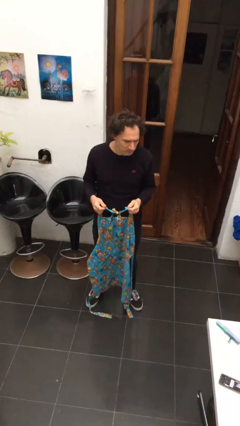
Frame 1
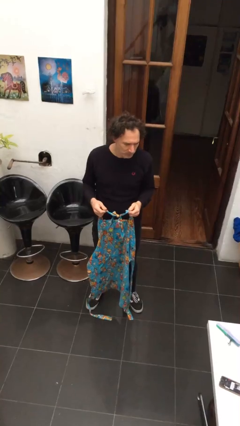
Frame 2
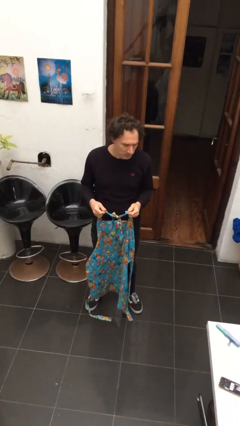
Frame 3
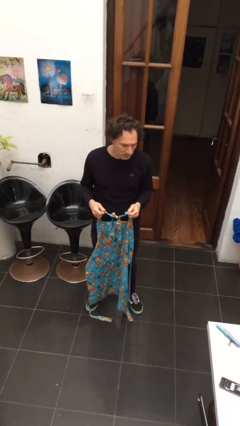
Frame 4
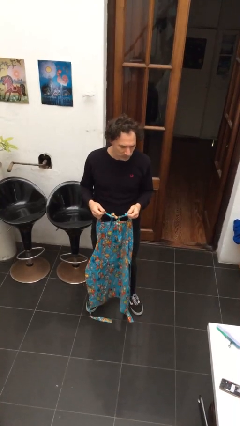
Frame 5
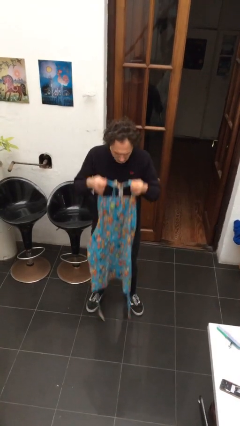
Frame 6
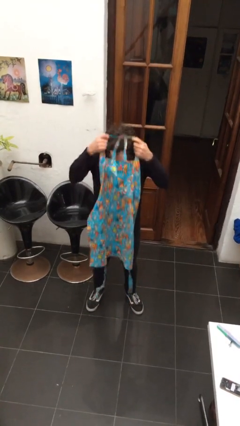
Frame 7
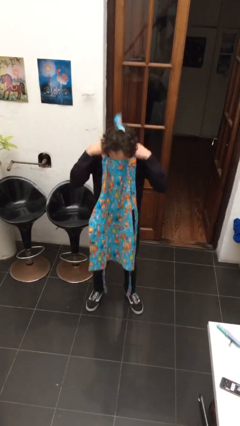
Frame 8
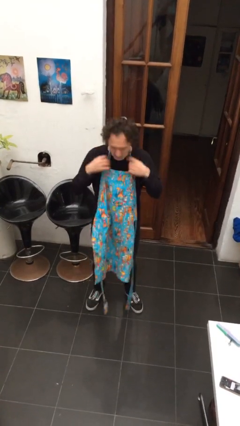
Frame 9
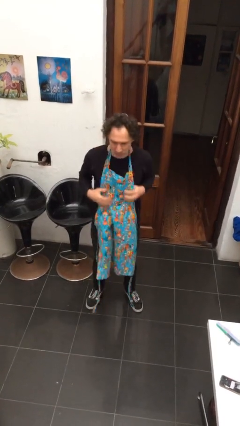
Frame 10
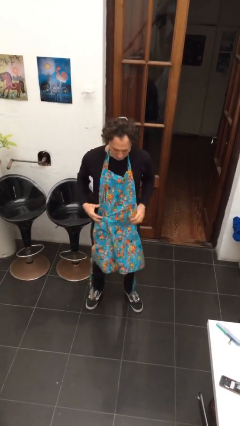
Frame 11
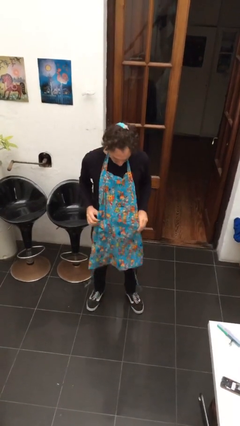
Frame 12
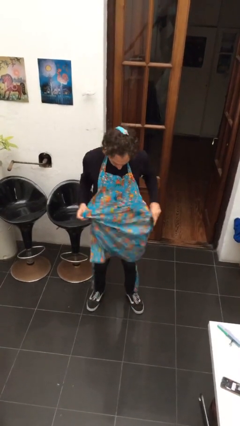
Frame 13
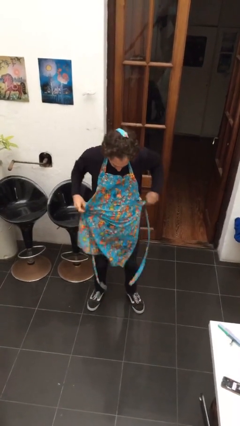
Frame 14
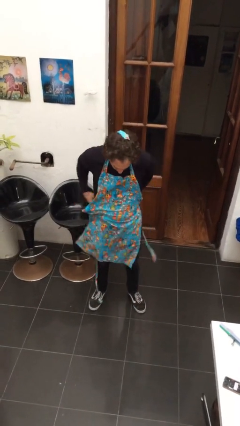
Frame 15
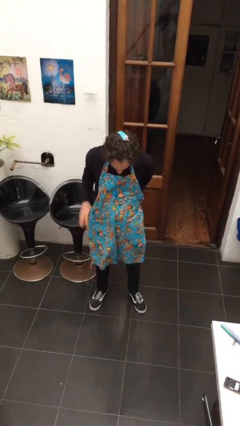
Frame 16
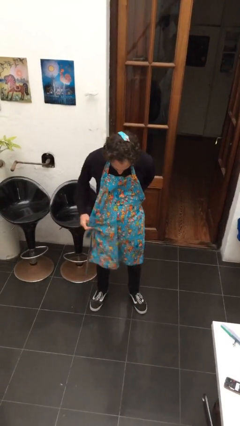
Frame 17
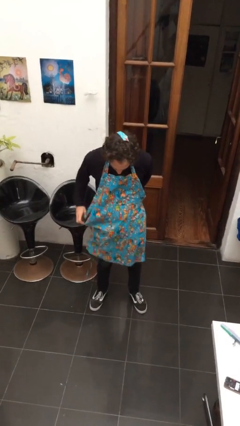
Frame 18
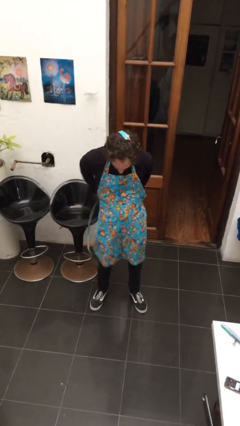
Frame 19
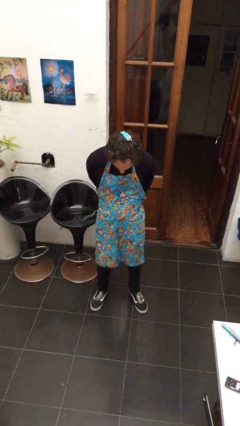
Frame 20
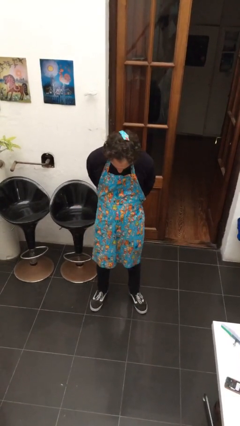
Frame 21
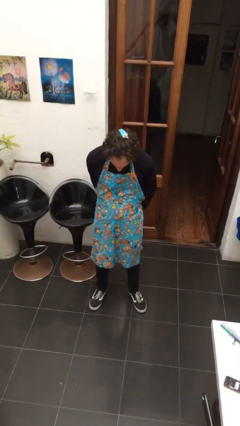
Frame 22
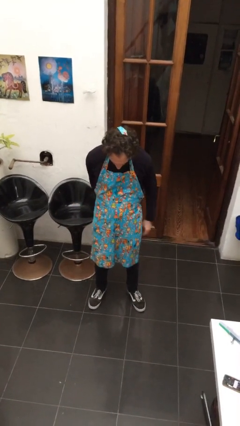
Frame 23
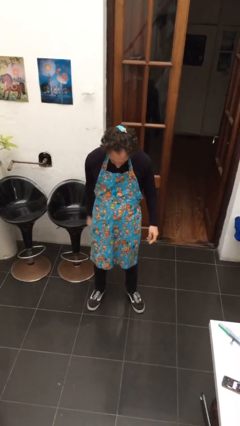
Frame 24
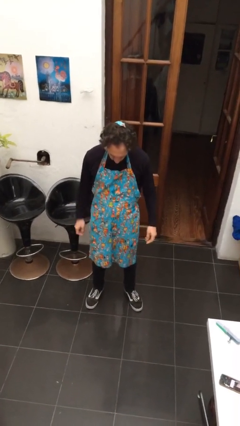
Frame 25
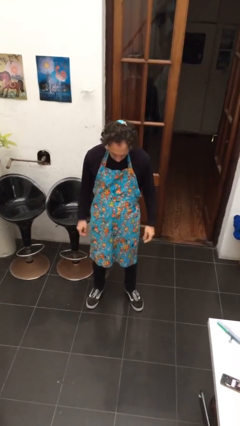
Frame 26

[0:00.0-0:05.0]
person puts on apron

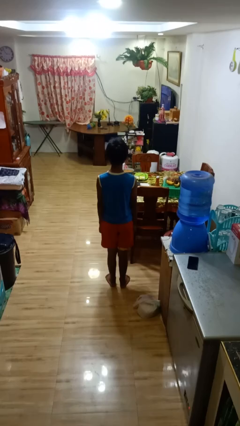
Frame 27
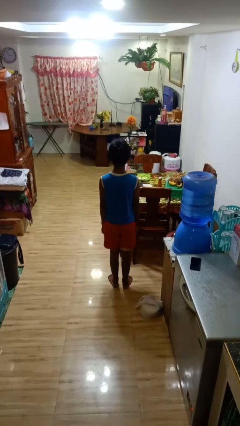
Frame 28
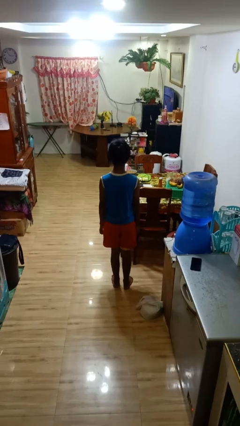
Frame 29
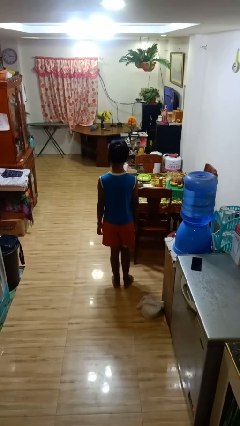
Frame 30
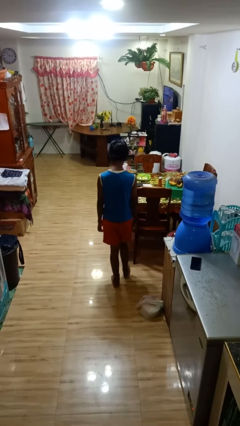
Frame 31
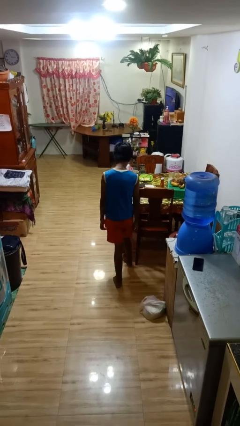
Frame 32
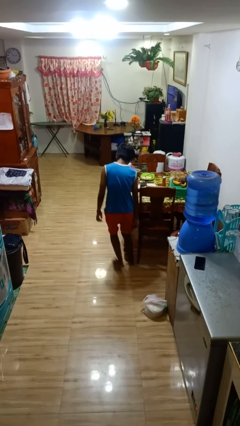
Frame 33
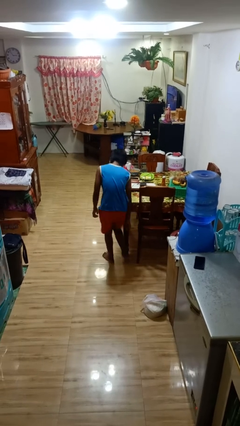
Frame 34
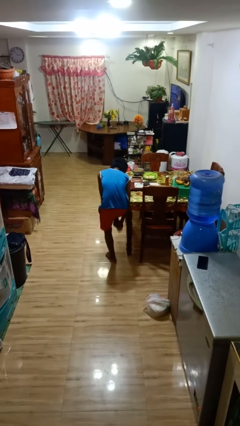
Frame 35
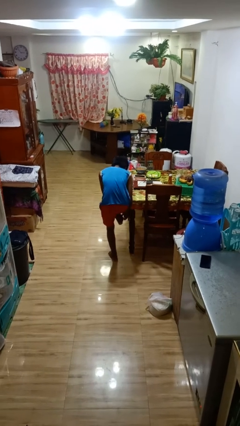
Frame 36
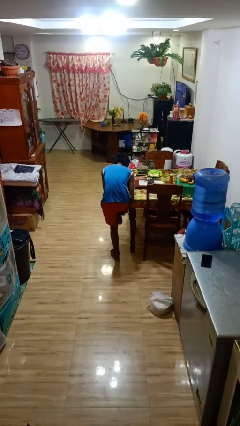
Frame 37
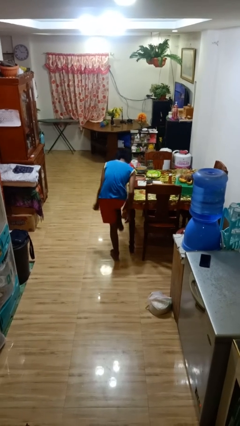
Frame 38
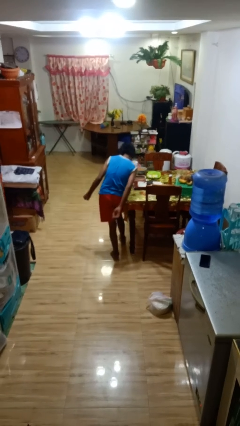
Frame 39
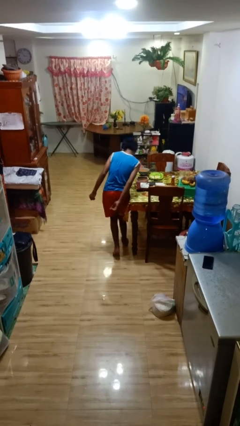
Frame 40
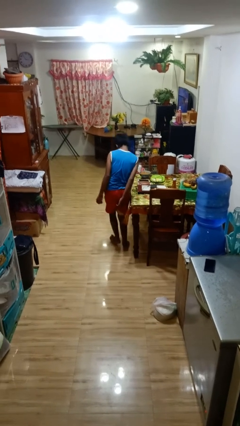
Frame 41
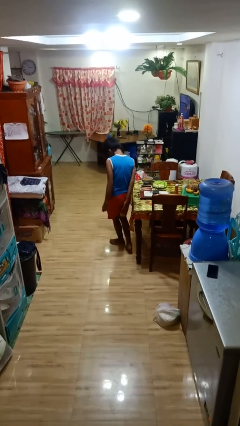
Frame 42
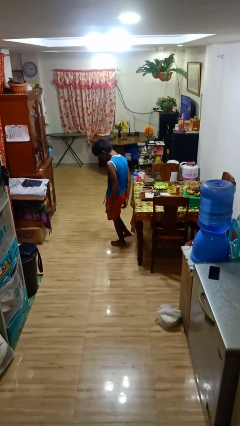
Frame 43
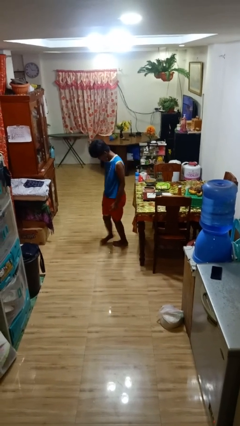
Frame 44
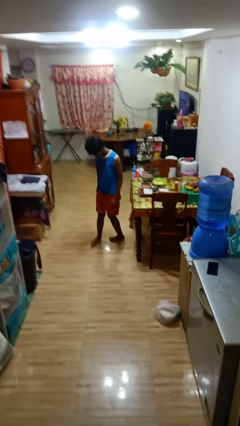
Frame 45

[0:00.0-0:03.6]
person bumps into table

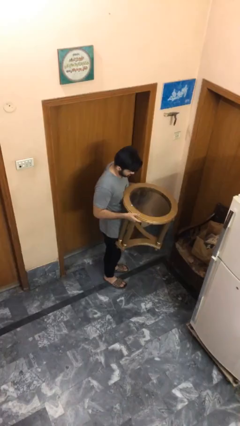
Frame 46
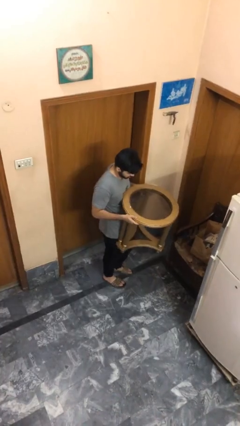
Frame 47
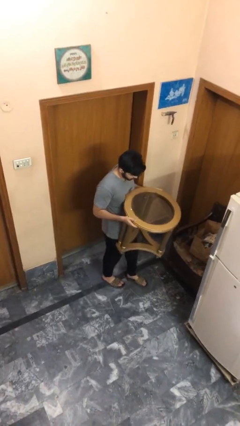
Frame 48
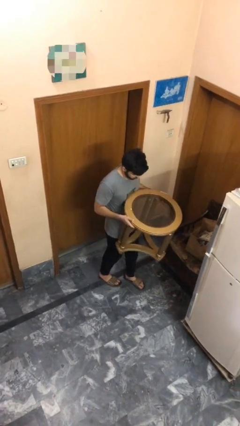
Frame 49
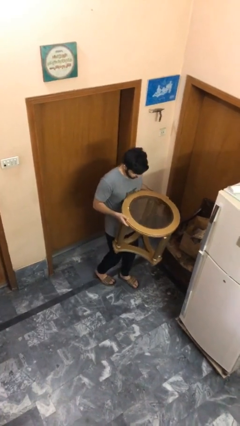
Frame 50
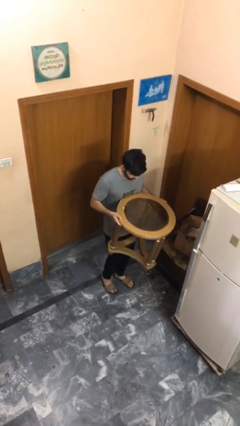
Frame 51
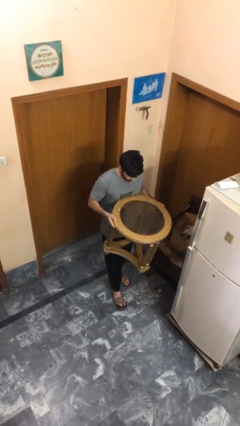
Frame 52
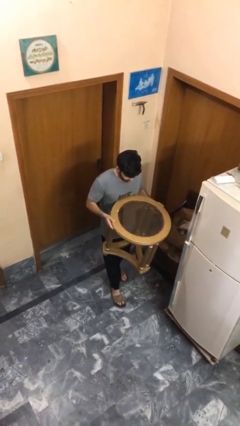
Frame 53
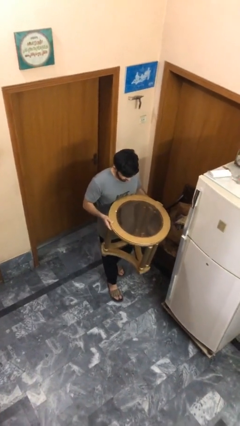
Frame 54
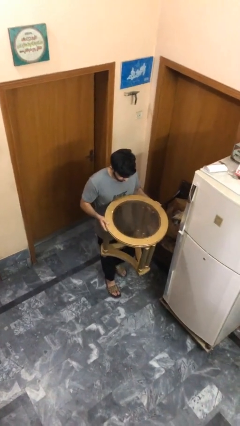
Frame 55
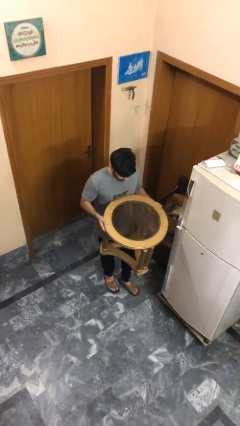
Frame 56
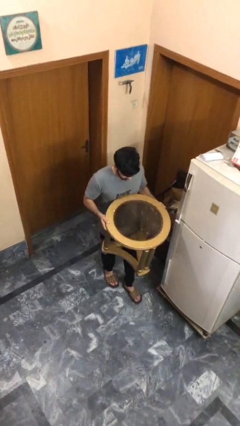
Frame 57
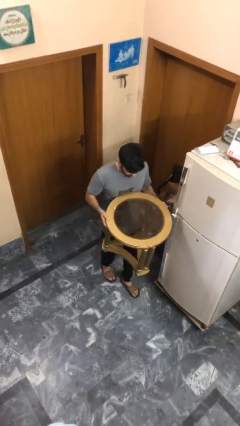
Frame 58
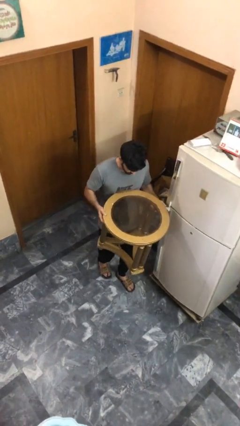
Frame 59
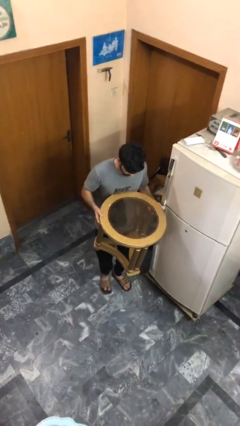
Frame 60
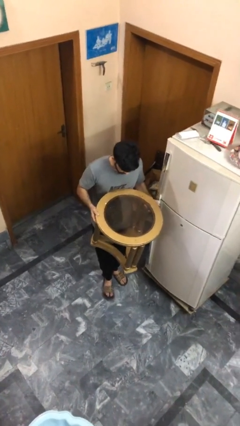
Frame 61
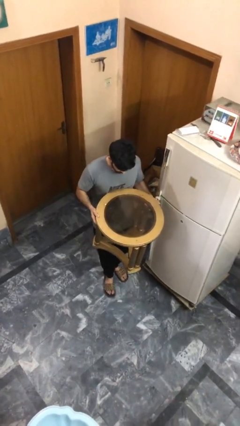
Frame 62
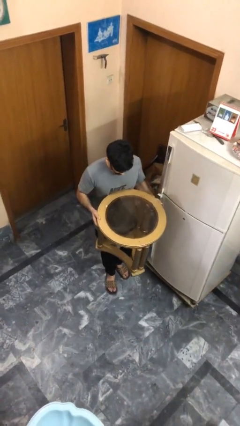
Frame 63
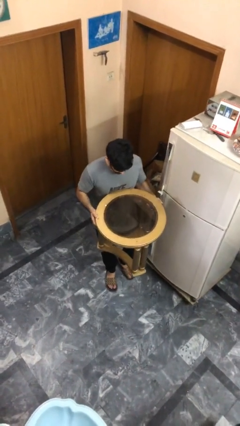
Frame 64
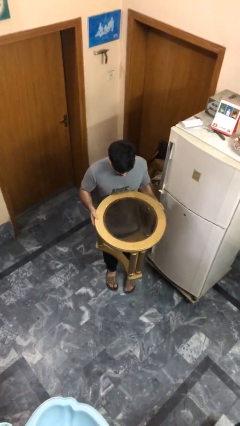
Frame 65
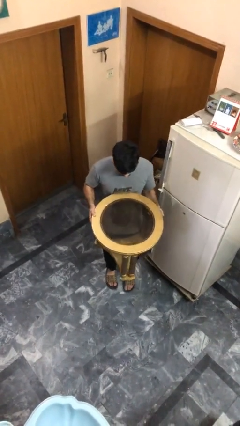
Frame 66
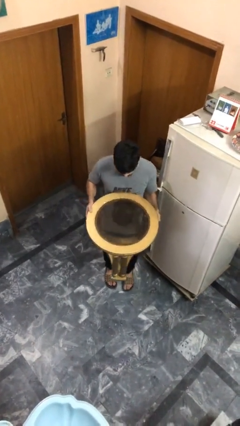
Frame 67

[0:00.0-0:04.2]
person carries furniture

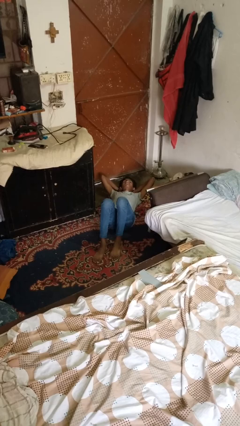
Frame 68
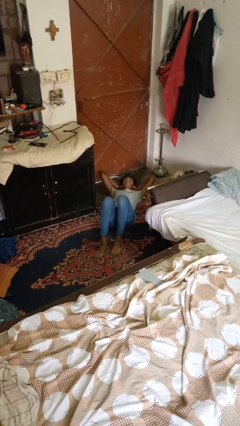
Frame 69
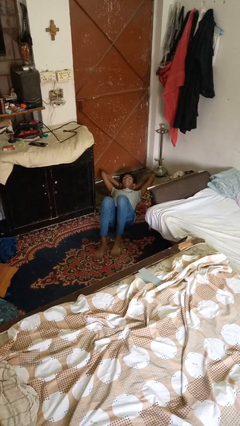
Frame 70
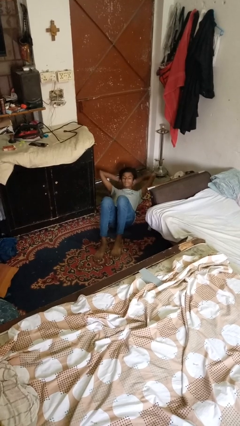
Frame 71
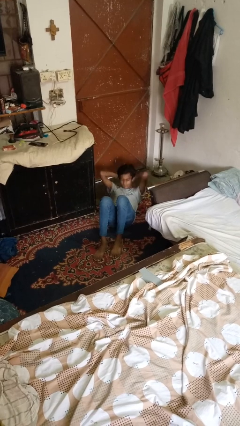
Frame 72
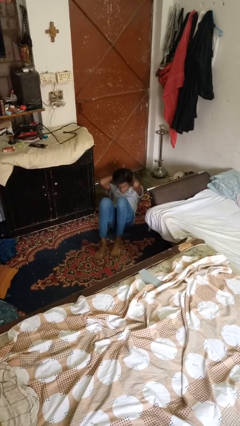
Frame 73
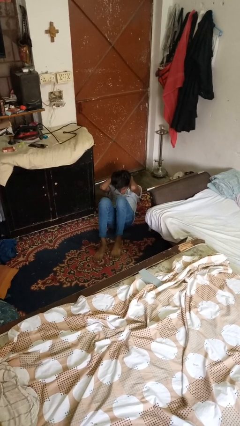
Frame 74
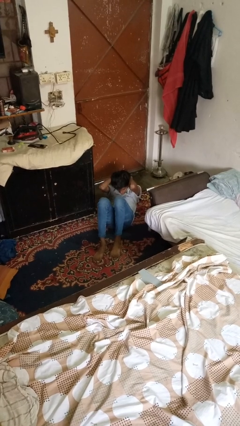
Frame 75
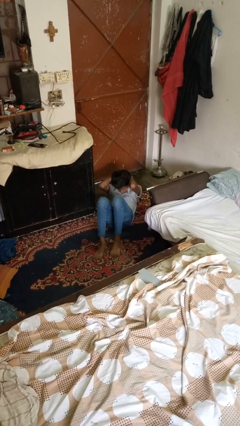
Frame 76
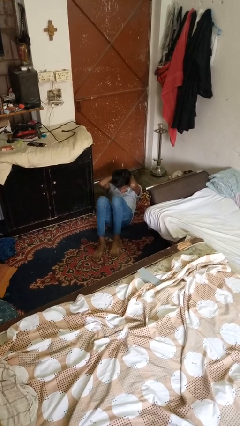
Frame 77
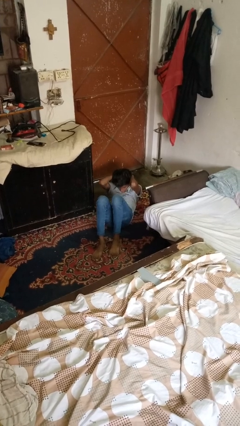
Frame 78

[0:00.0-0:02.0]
person exercises with situp

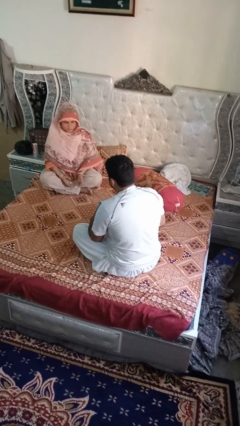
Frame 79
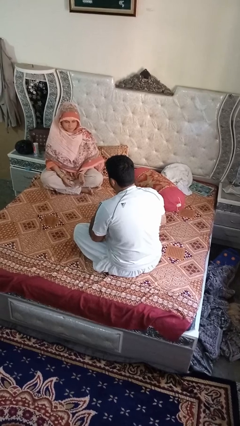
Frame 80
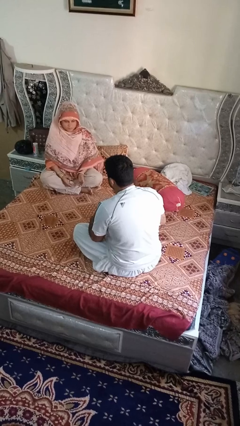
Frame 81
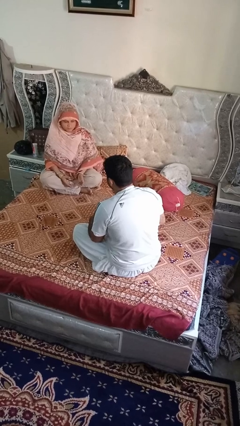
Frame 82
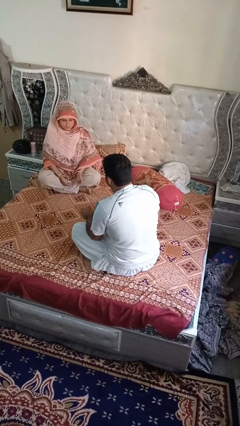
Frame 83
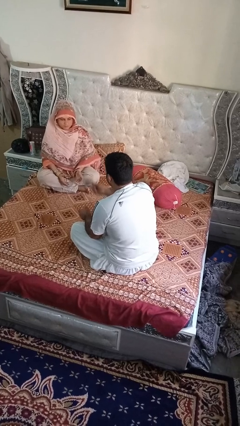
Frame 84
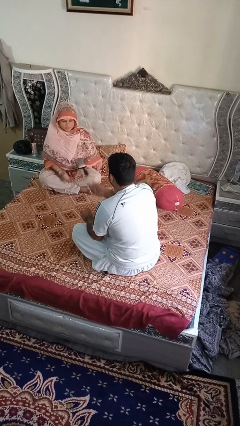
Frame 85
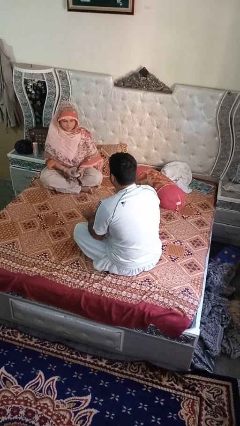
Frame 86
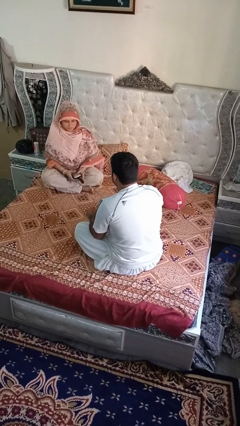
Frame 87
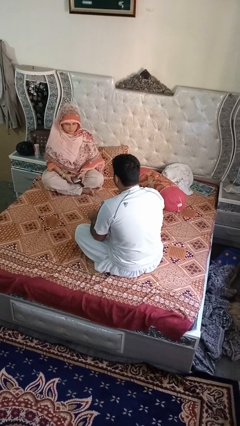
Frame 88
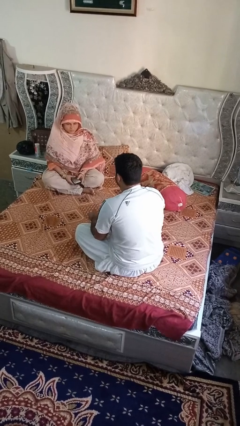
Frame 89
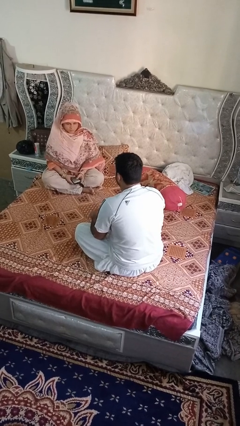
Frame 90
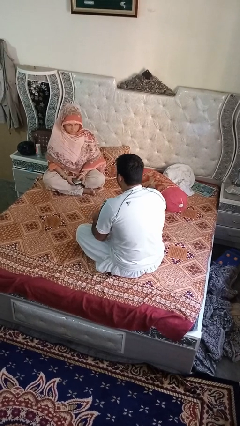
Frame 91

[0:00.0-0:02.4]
person throws object to person

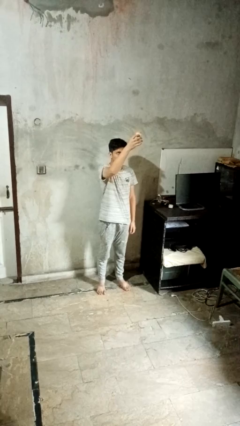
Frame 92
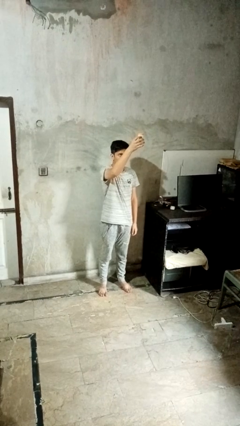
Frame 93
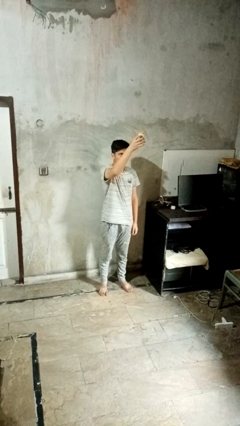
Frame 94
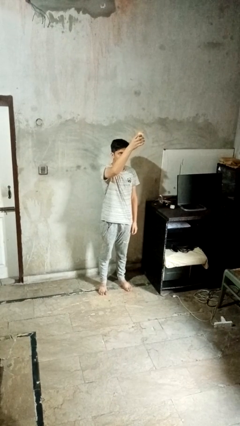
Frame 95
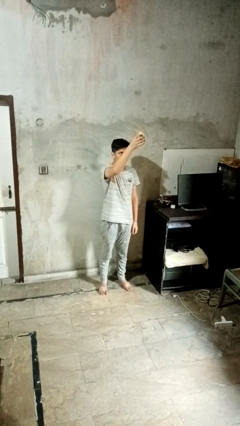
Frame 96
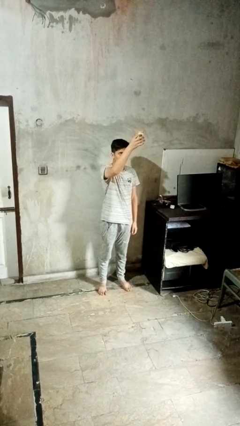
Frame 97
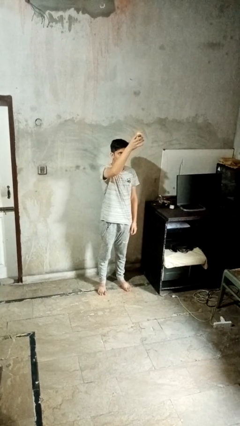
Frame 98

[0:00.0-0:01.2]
person drops object
